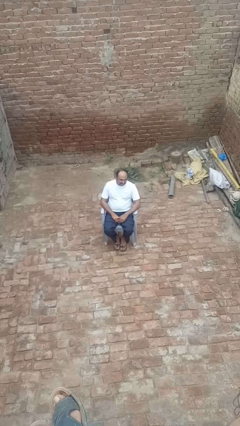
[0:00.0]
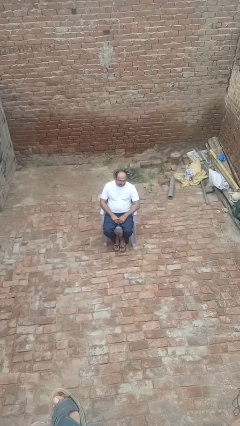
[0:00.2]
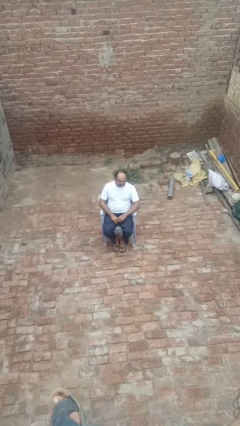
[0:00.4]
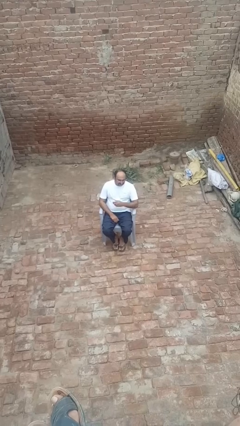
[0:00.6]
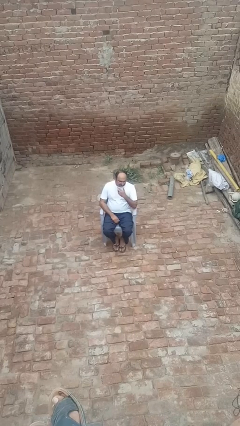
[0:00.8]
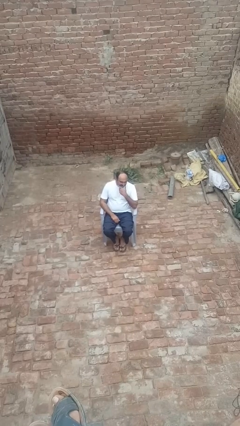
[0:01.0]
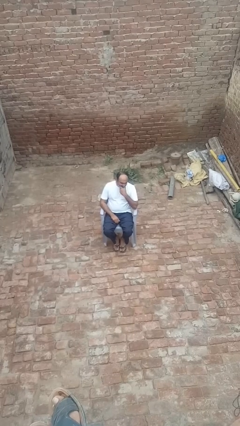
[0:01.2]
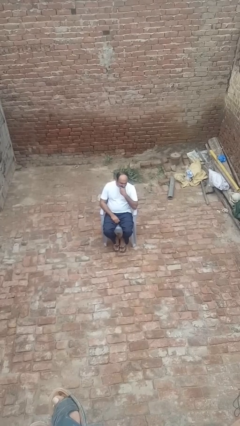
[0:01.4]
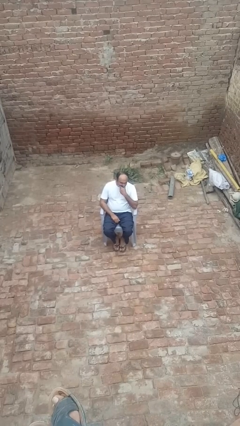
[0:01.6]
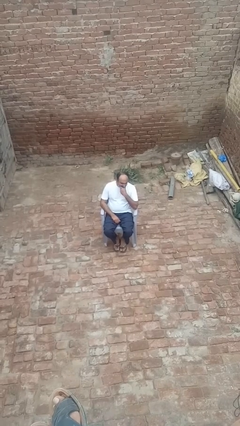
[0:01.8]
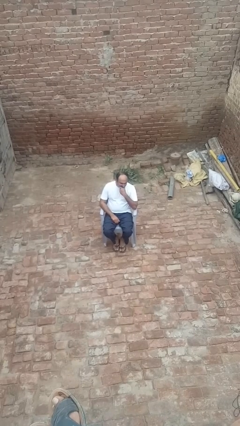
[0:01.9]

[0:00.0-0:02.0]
person strokes chin

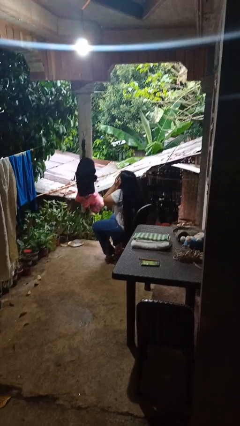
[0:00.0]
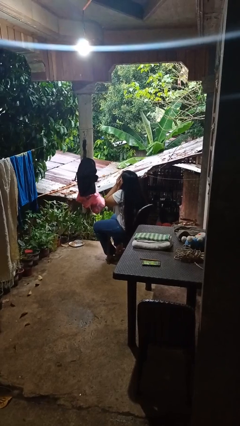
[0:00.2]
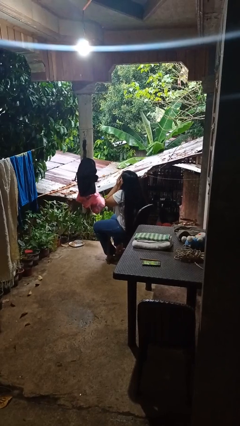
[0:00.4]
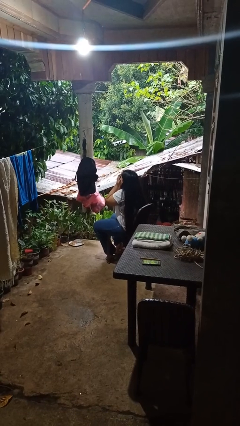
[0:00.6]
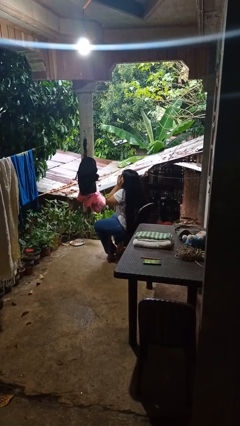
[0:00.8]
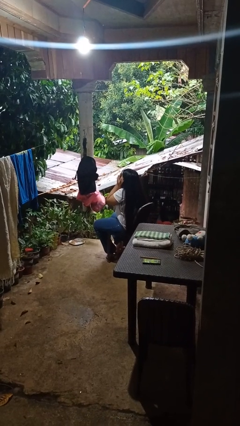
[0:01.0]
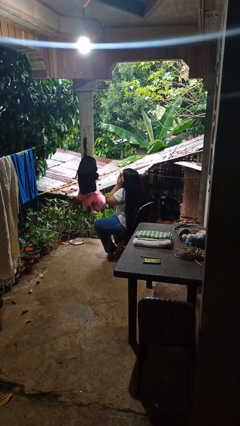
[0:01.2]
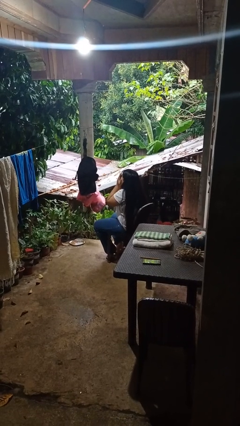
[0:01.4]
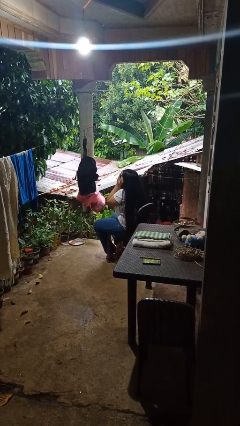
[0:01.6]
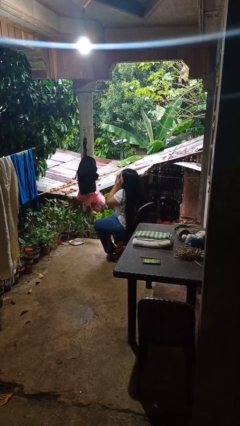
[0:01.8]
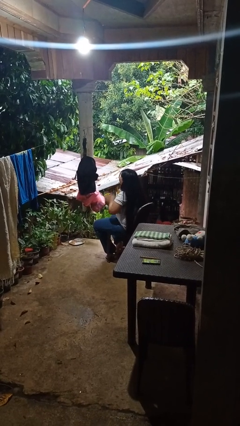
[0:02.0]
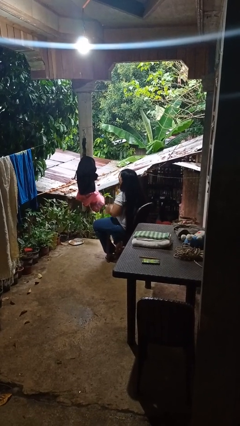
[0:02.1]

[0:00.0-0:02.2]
person covers face with hands

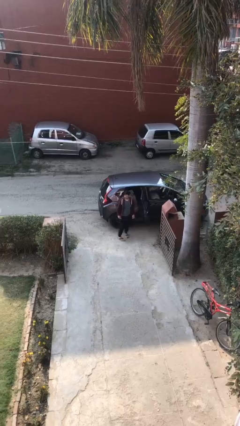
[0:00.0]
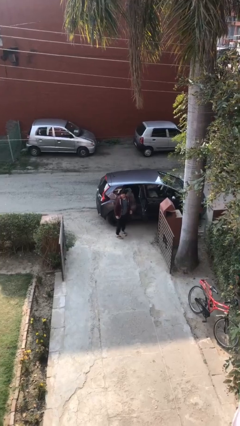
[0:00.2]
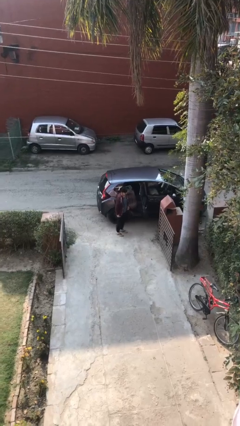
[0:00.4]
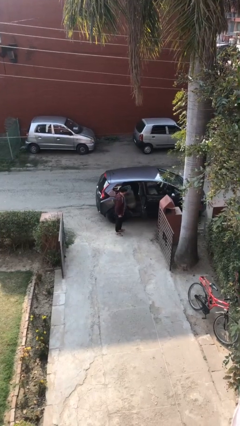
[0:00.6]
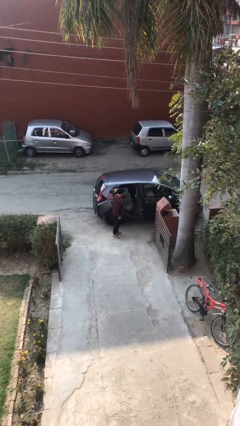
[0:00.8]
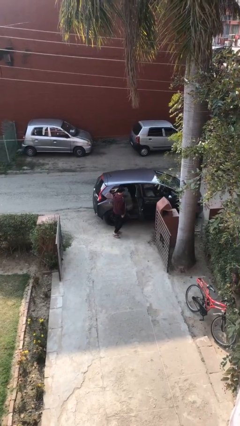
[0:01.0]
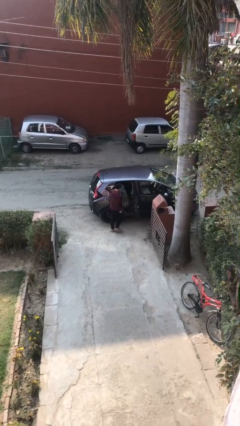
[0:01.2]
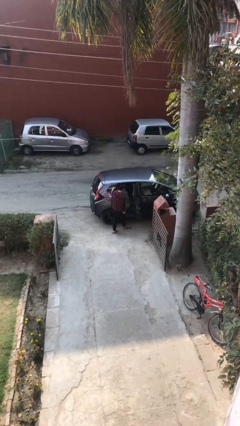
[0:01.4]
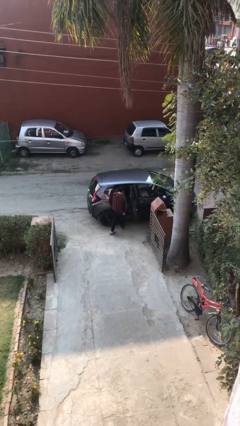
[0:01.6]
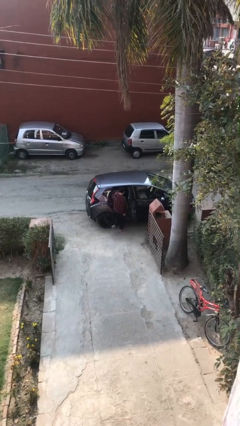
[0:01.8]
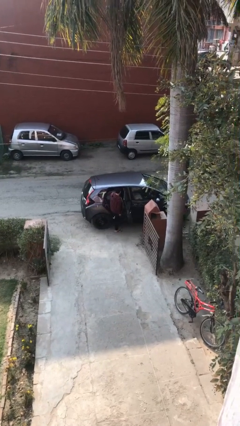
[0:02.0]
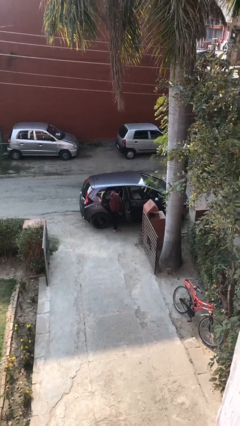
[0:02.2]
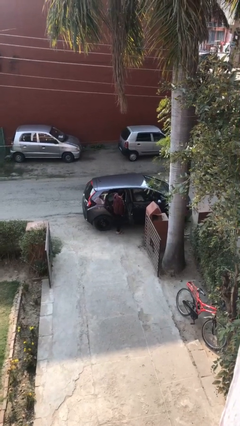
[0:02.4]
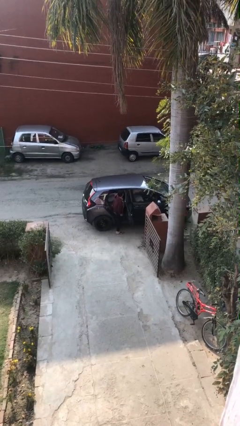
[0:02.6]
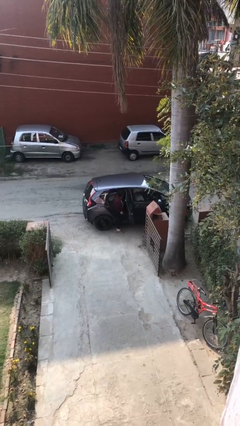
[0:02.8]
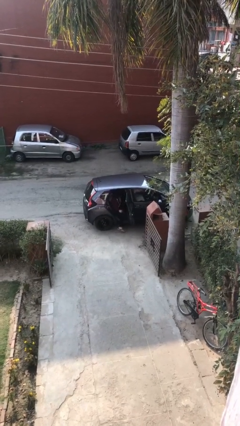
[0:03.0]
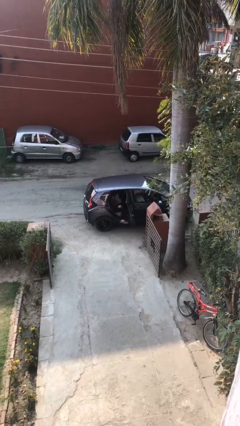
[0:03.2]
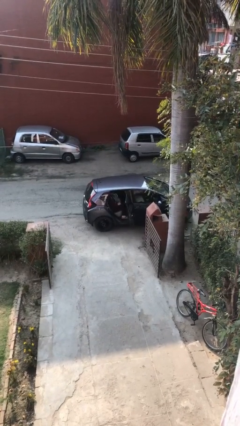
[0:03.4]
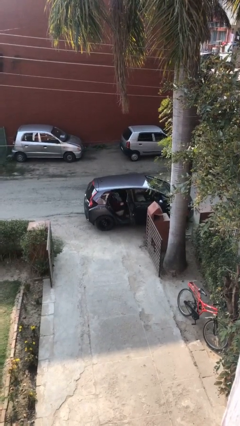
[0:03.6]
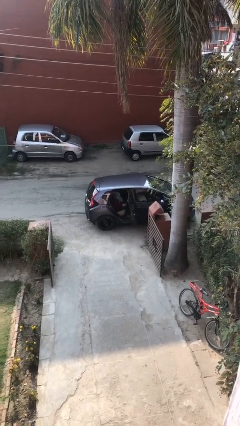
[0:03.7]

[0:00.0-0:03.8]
person enters car

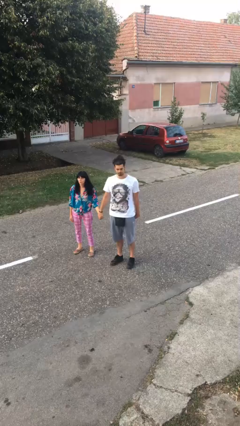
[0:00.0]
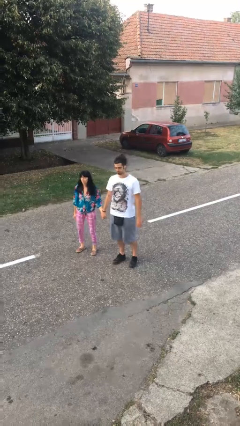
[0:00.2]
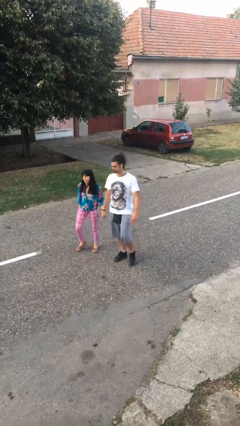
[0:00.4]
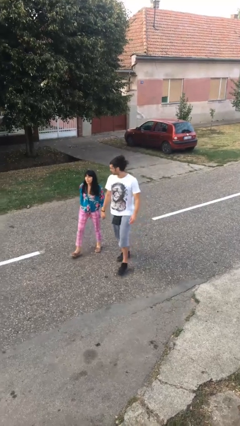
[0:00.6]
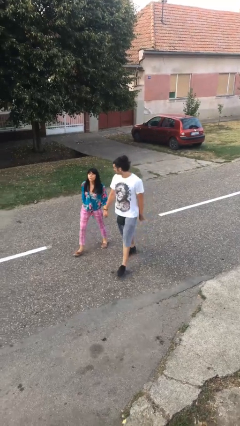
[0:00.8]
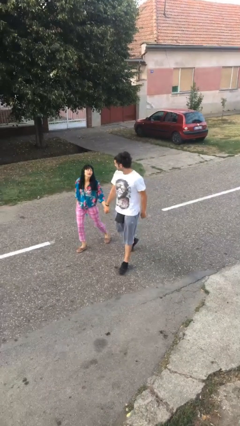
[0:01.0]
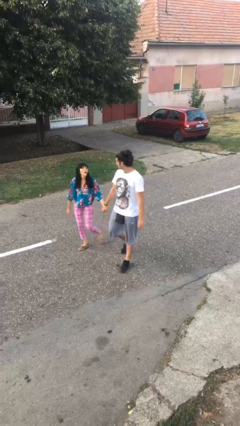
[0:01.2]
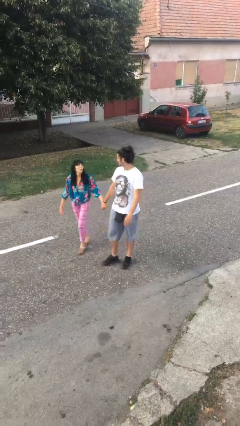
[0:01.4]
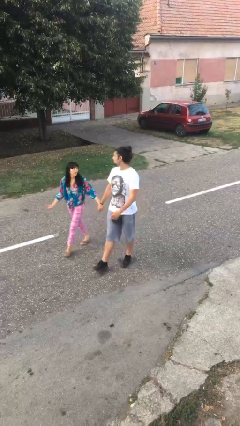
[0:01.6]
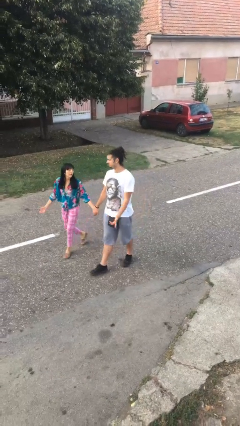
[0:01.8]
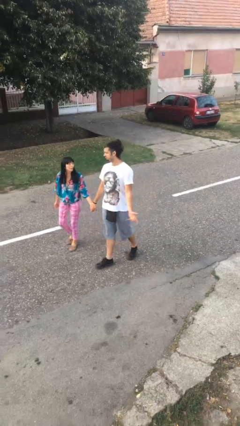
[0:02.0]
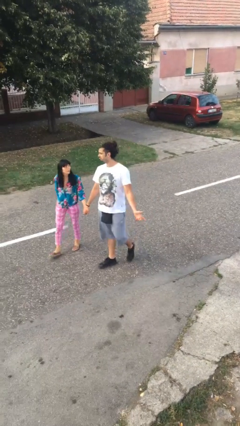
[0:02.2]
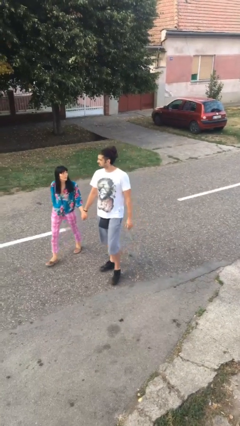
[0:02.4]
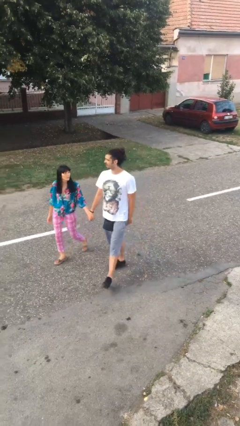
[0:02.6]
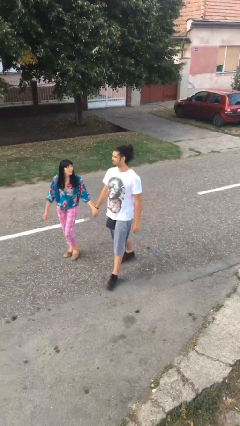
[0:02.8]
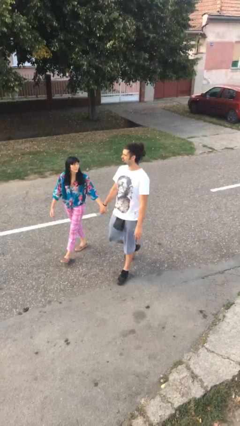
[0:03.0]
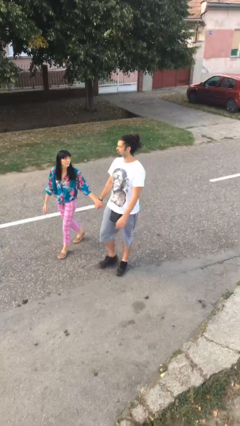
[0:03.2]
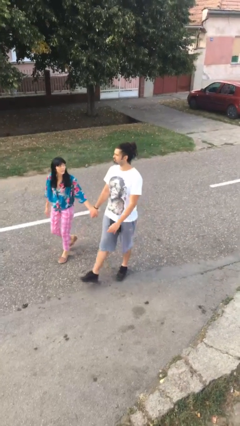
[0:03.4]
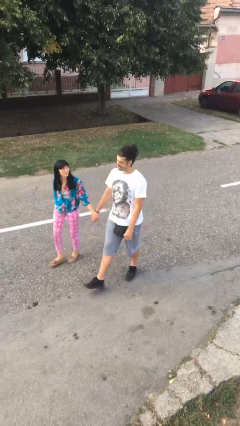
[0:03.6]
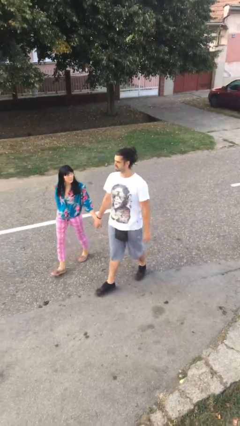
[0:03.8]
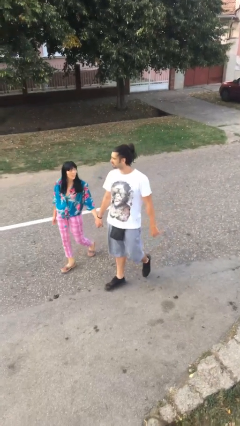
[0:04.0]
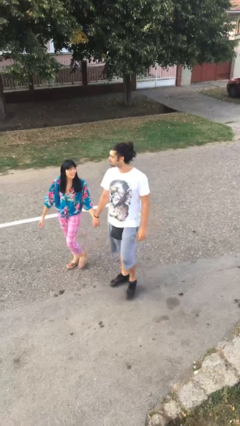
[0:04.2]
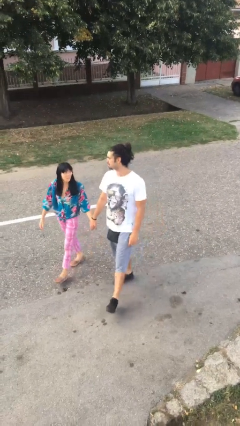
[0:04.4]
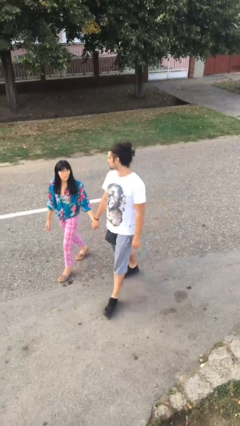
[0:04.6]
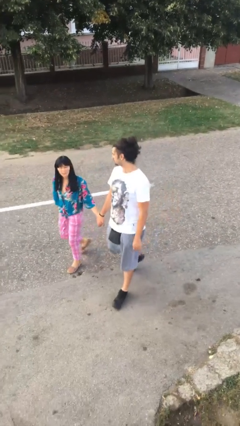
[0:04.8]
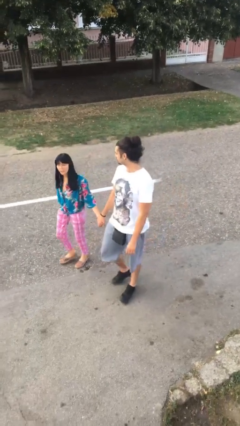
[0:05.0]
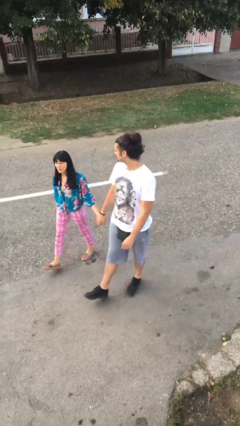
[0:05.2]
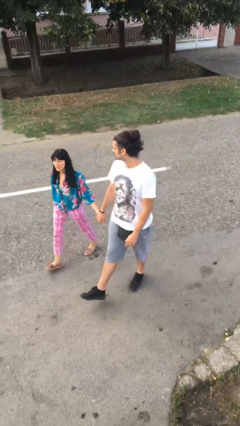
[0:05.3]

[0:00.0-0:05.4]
person holds hand

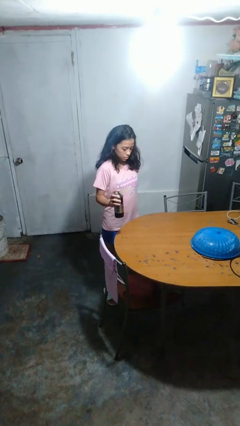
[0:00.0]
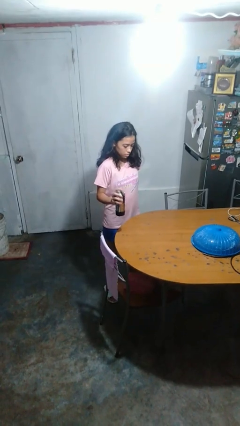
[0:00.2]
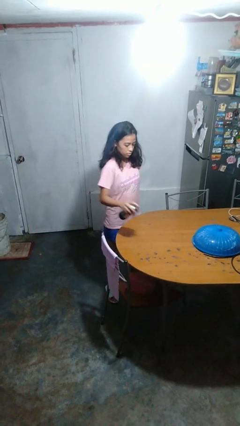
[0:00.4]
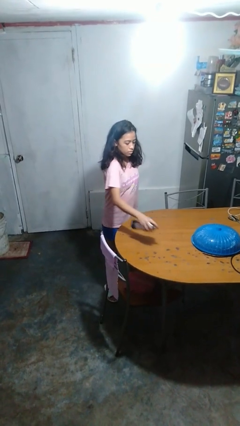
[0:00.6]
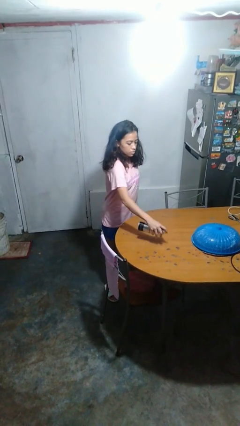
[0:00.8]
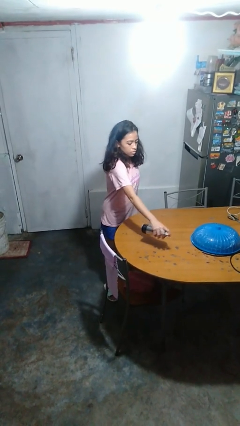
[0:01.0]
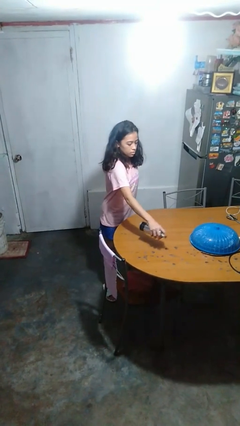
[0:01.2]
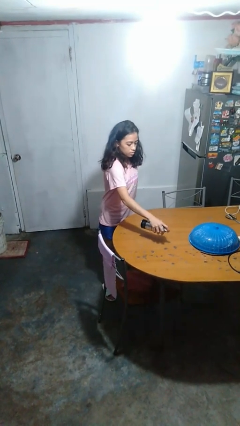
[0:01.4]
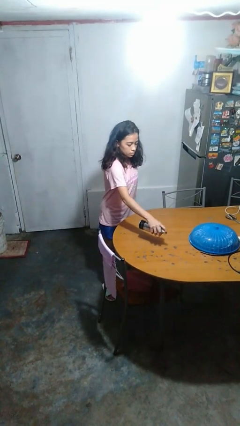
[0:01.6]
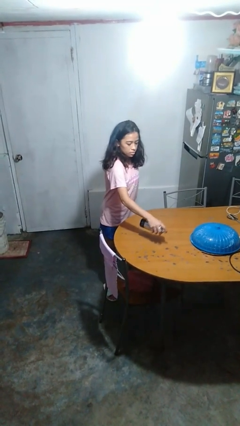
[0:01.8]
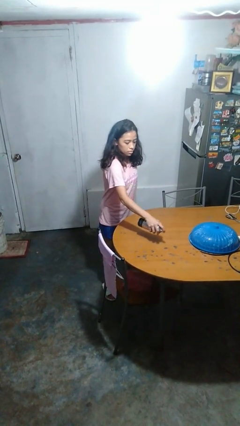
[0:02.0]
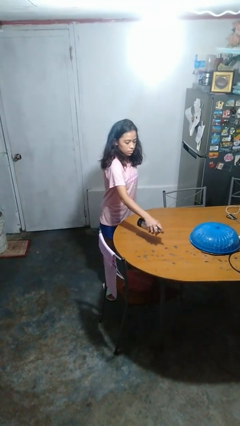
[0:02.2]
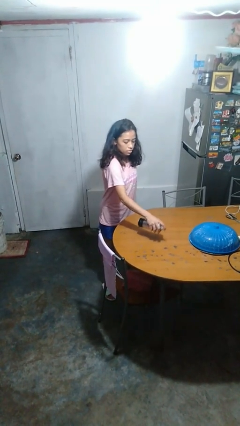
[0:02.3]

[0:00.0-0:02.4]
person sprays from bottle

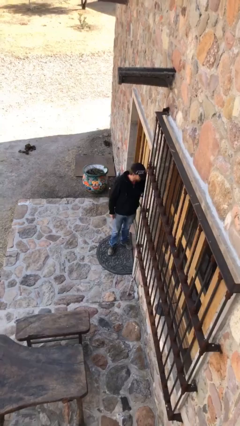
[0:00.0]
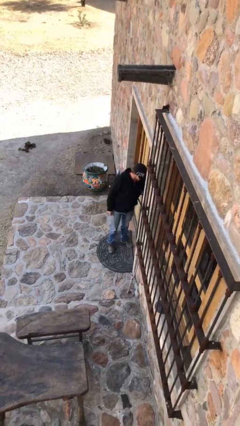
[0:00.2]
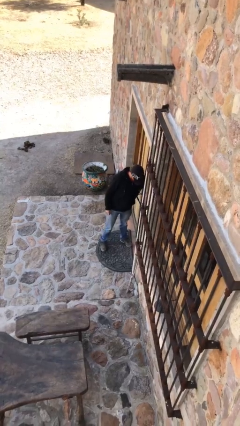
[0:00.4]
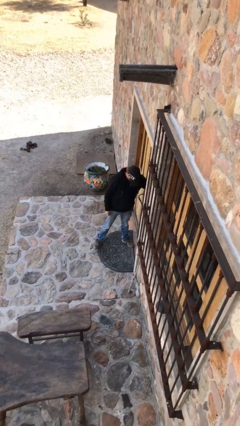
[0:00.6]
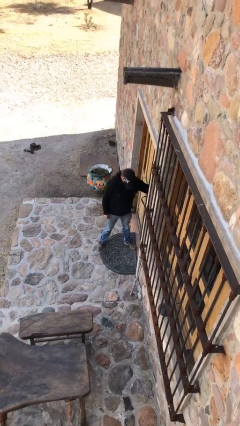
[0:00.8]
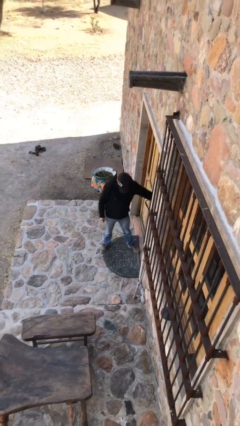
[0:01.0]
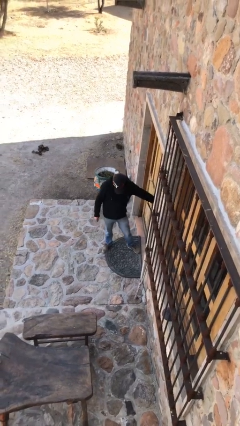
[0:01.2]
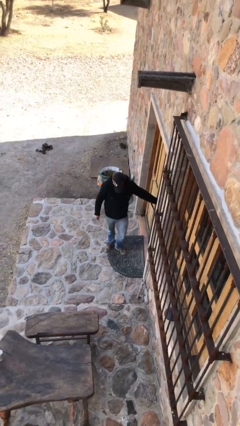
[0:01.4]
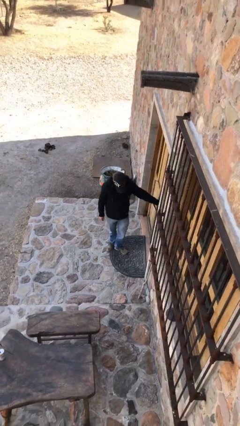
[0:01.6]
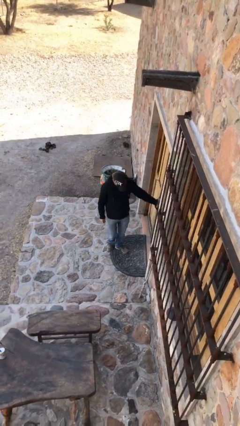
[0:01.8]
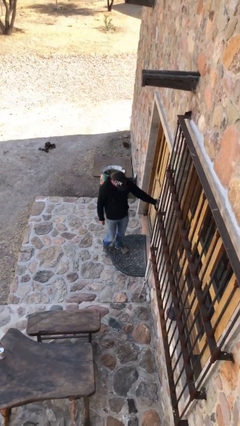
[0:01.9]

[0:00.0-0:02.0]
person closes facility door
